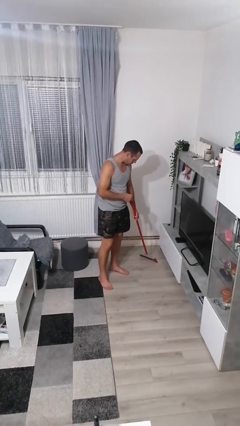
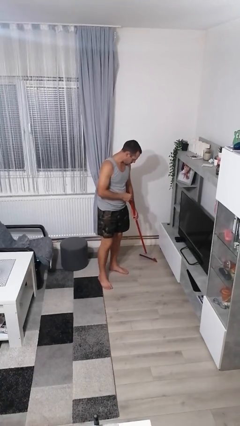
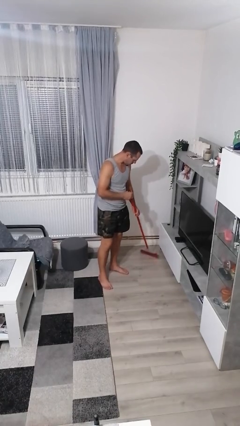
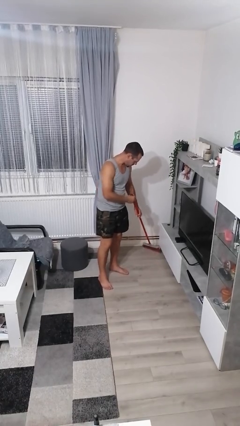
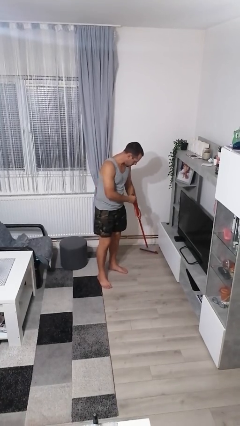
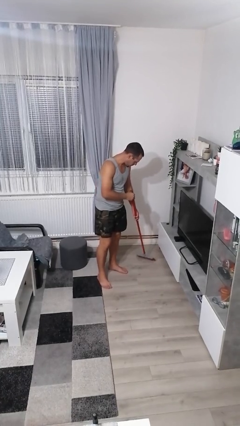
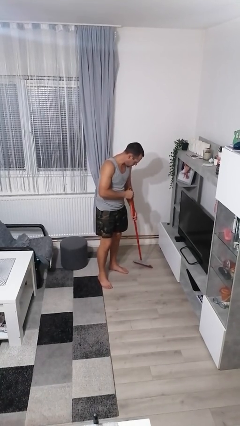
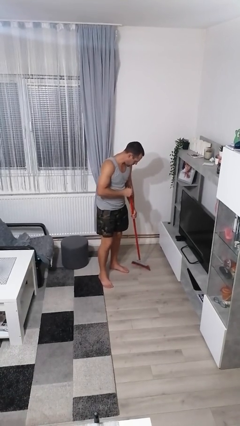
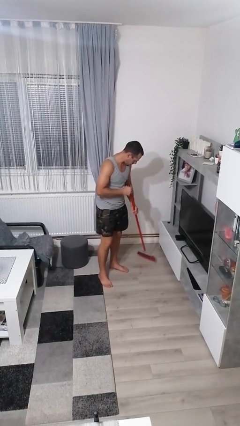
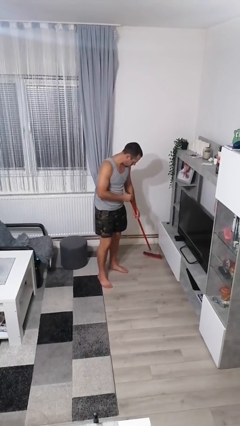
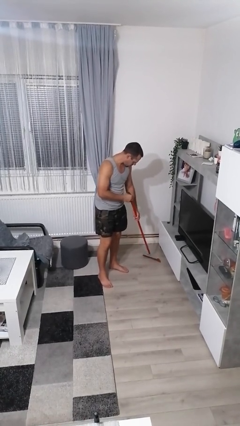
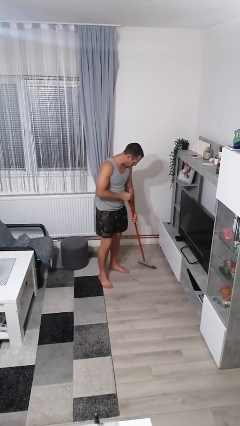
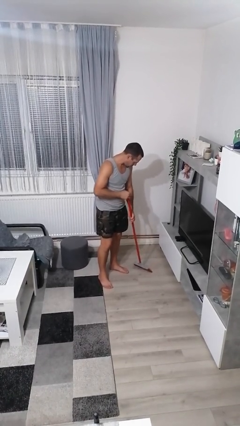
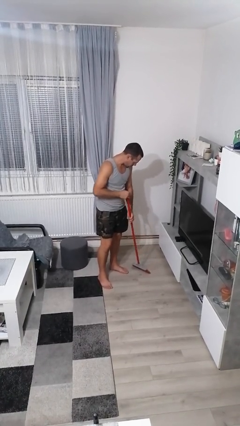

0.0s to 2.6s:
person sweeps floor

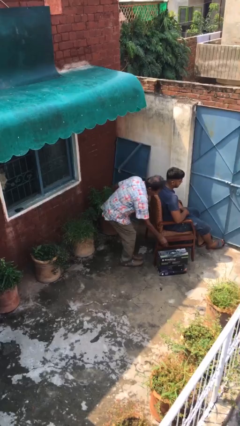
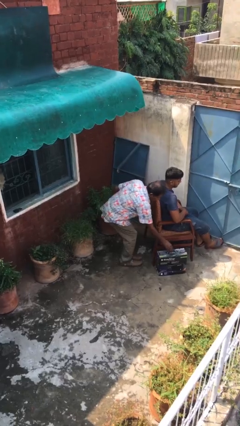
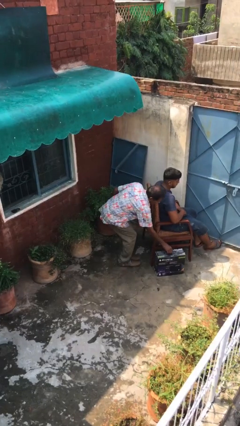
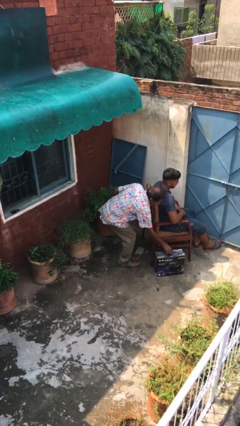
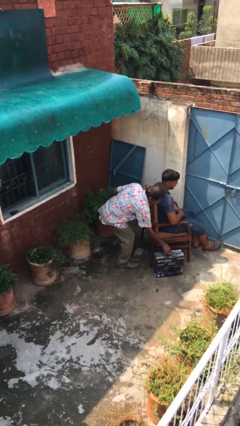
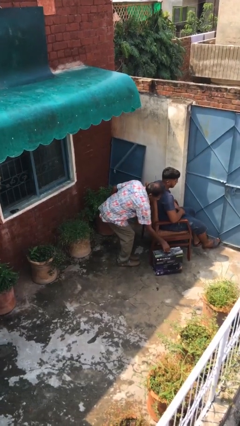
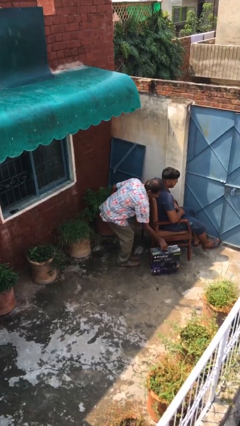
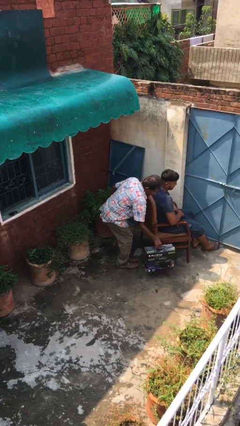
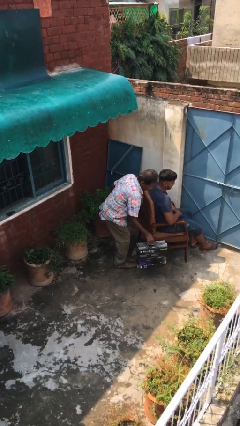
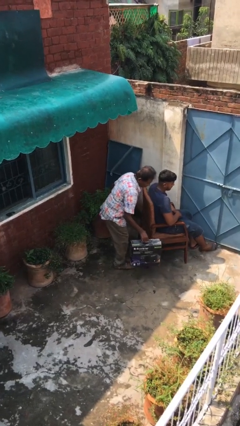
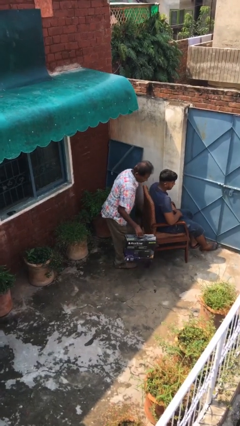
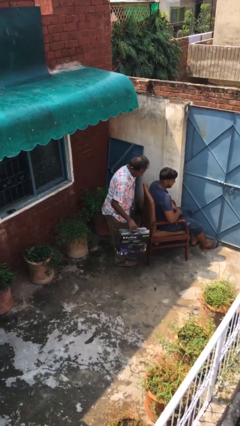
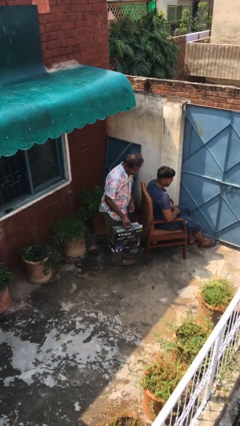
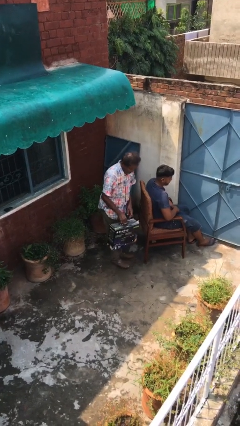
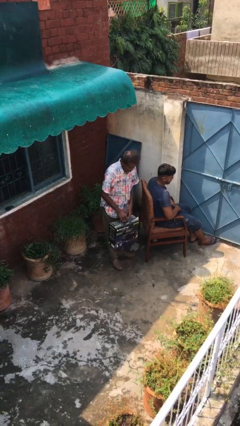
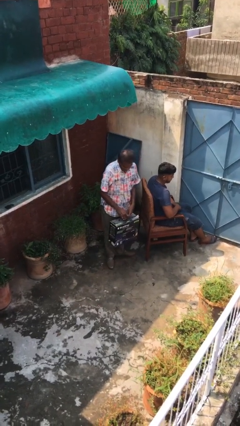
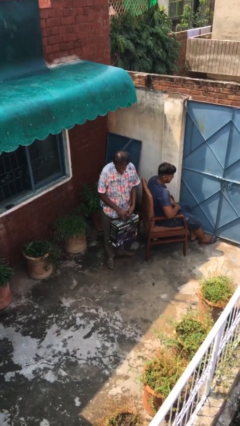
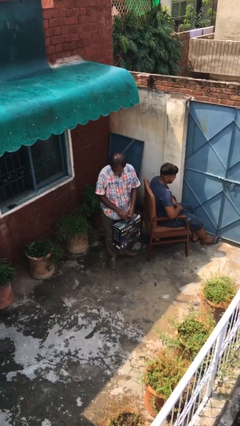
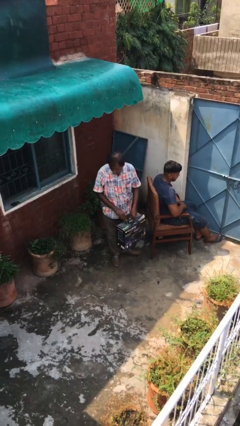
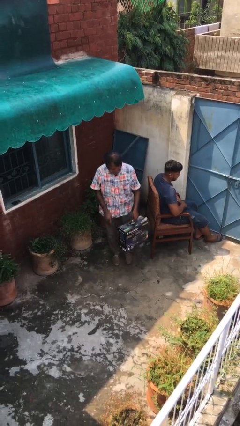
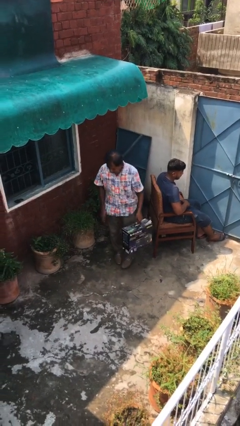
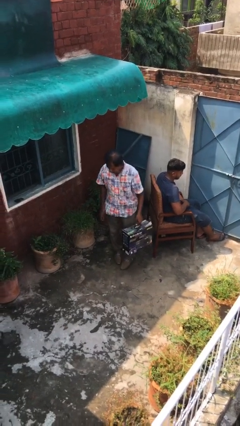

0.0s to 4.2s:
person steals object from person

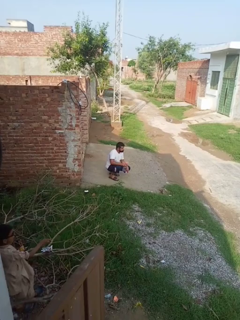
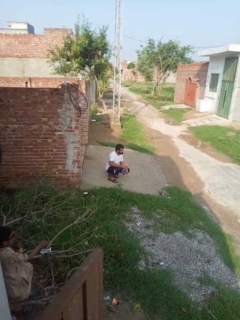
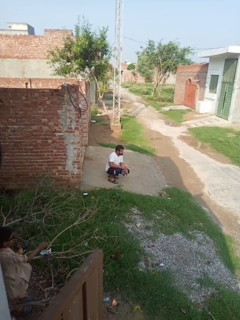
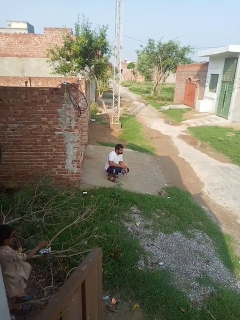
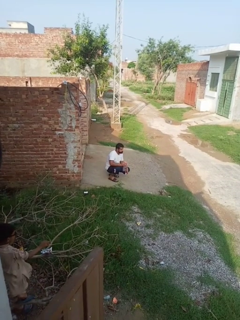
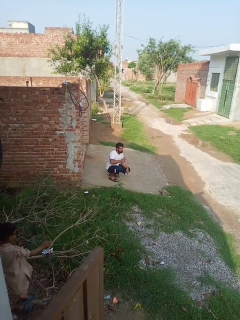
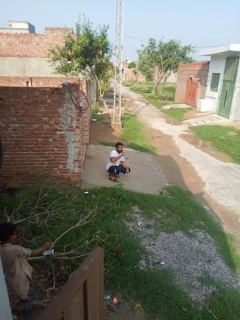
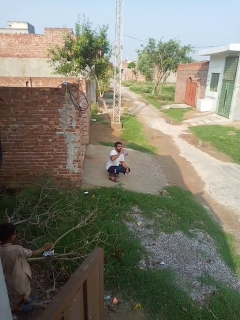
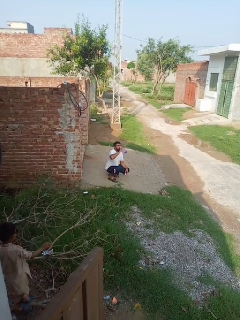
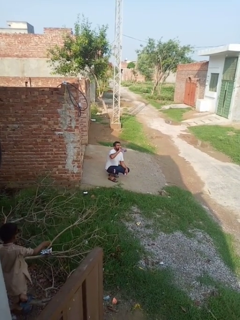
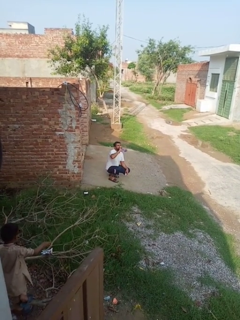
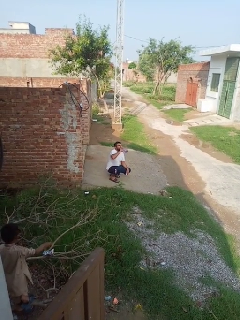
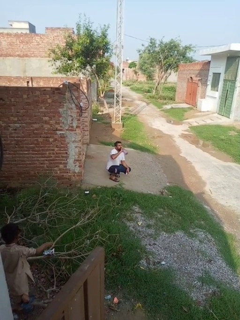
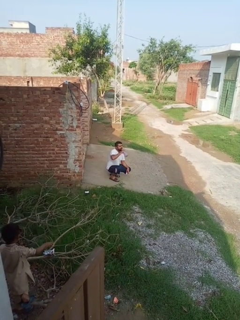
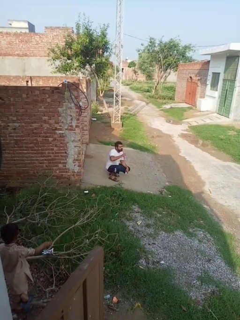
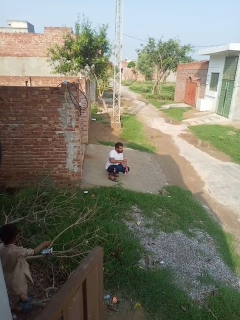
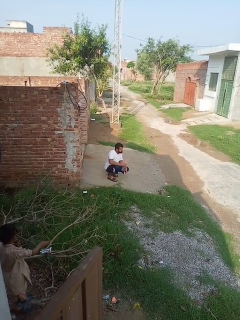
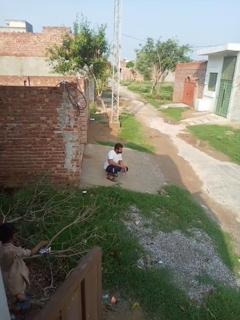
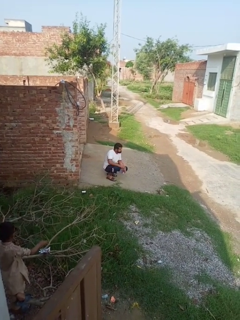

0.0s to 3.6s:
person drinks from bottle

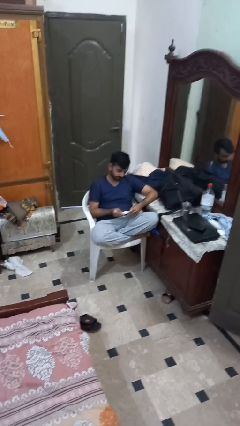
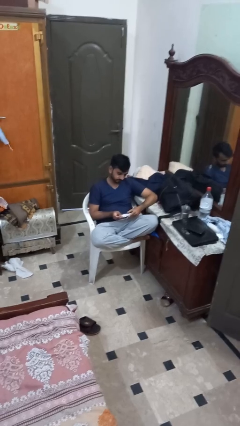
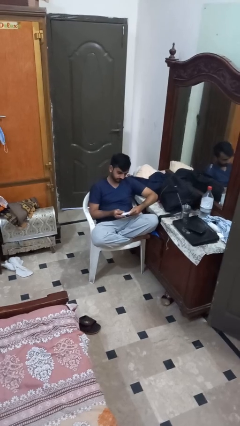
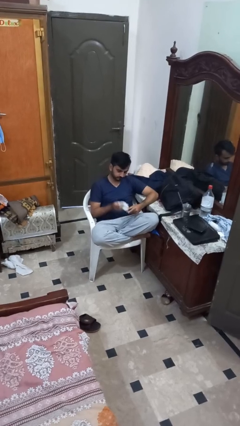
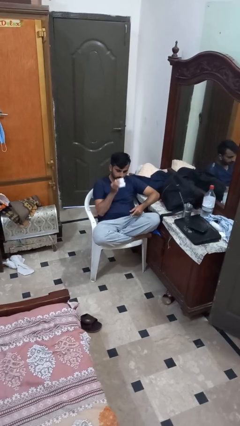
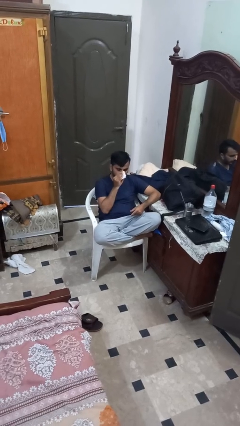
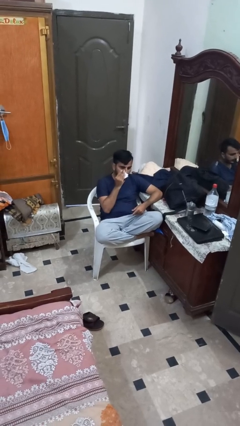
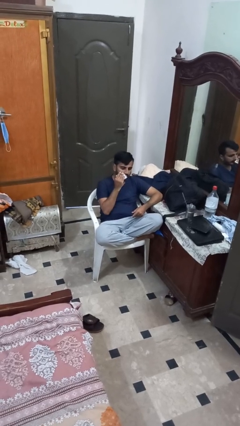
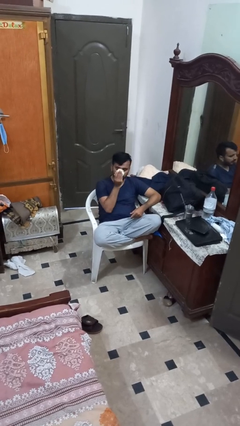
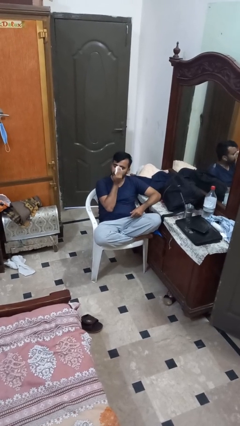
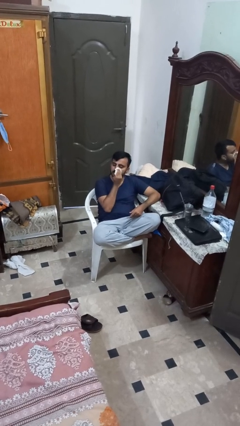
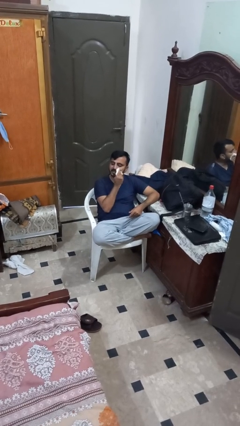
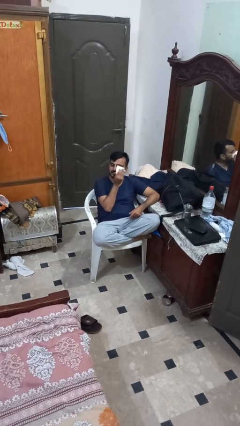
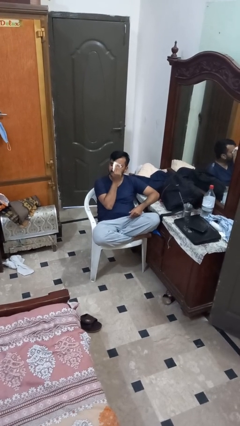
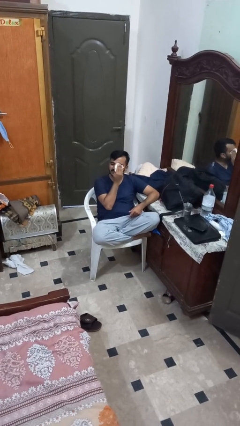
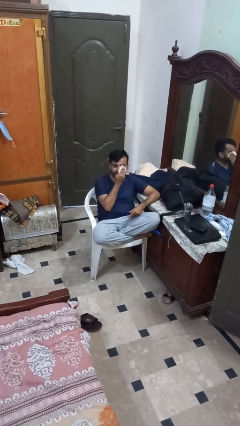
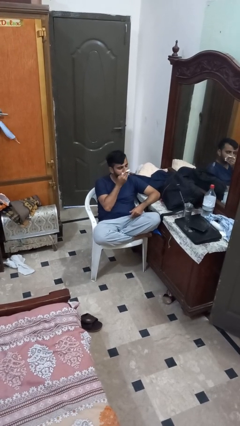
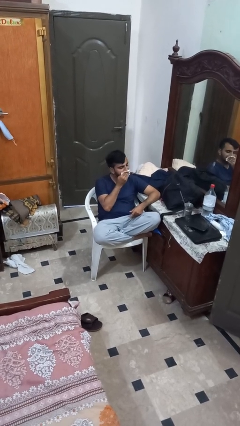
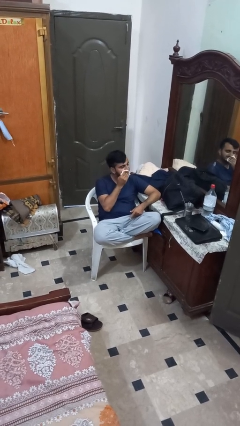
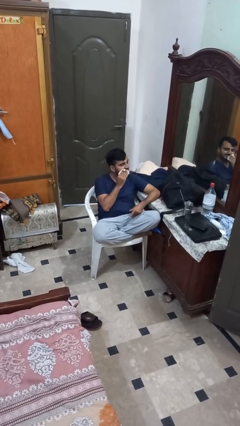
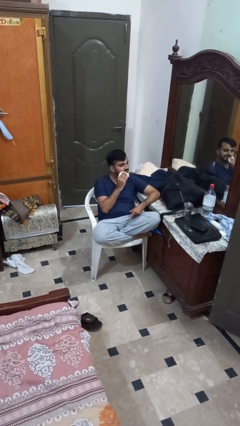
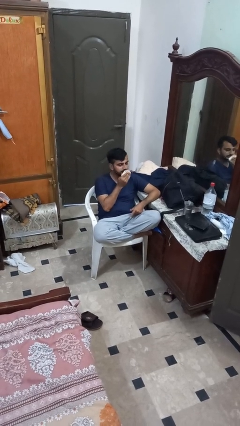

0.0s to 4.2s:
person wipes mouth with napkin

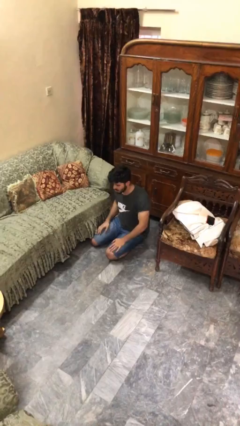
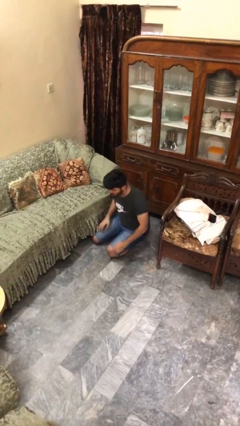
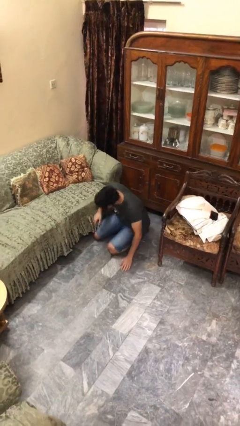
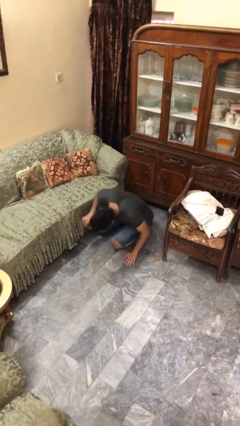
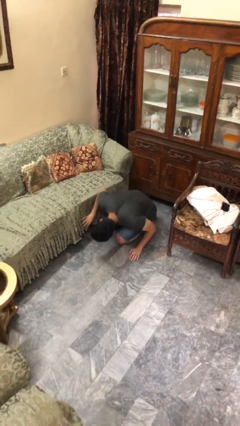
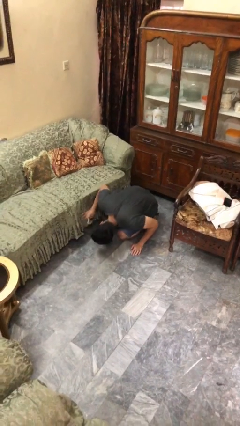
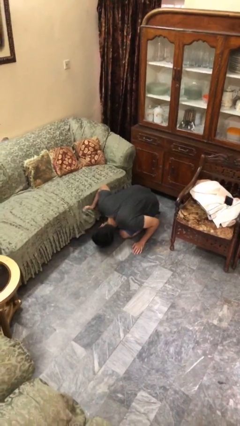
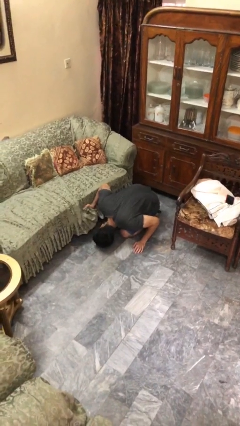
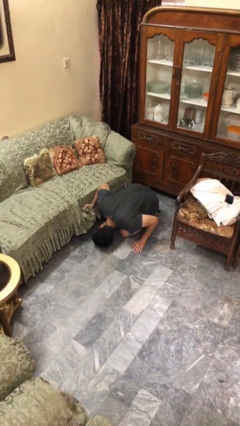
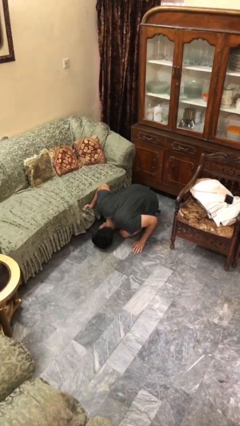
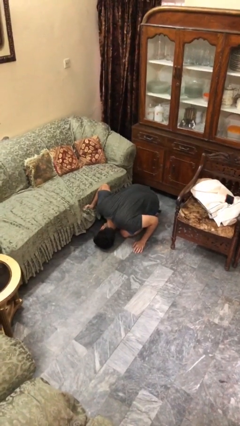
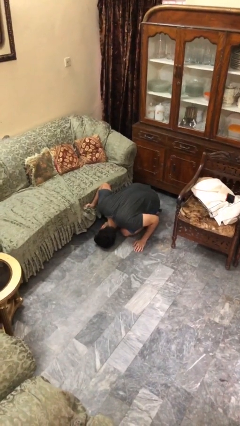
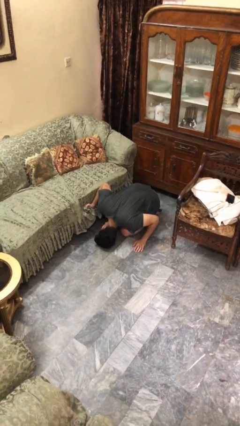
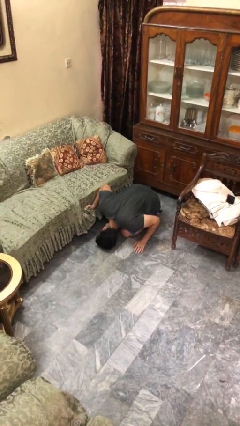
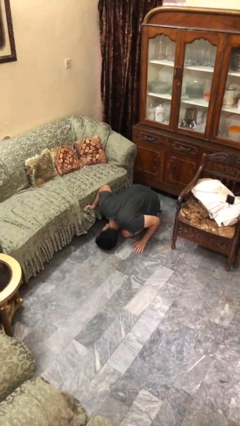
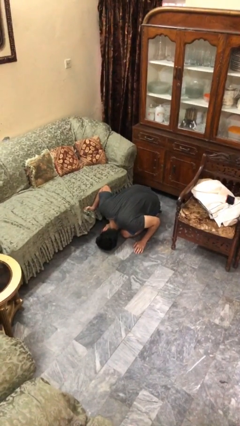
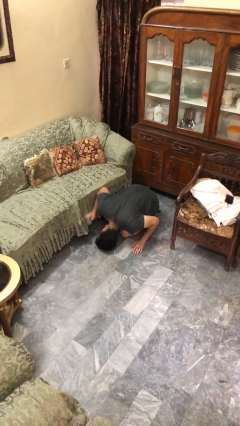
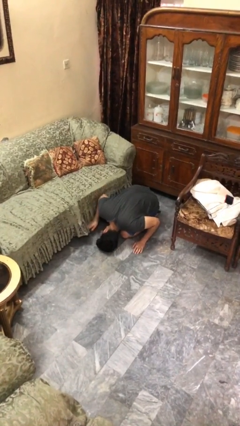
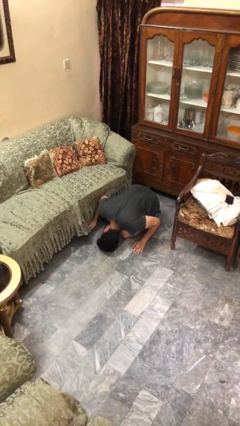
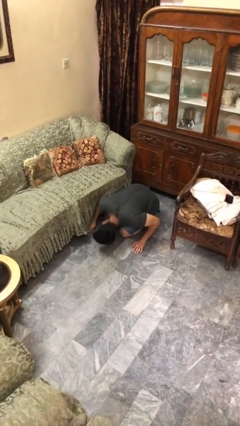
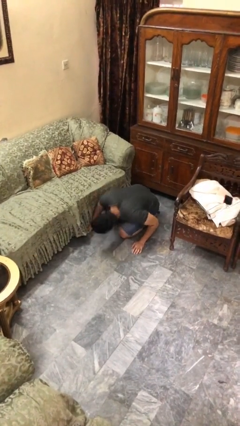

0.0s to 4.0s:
person searches under couch
